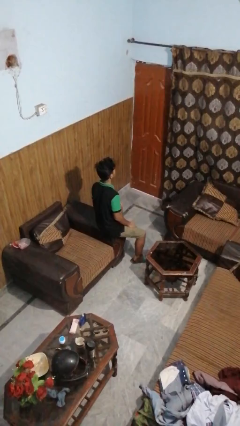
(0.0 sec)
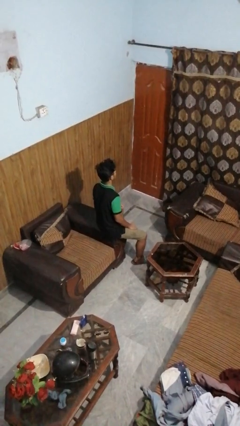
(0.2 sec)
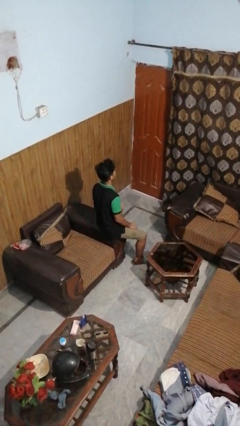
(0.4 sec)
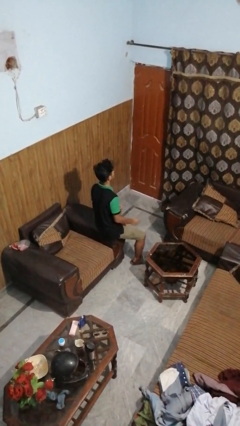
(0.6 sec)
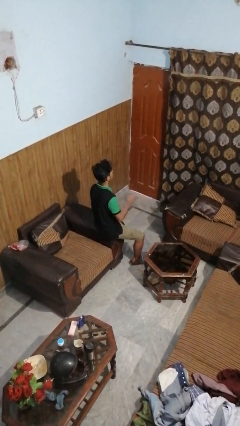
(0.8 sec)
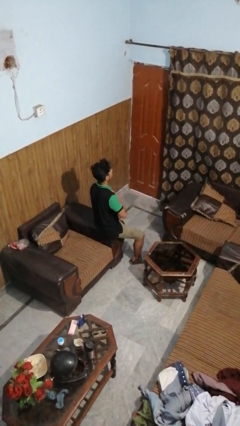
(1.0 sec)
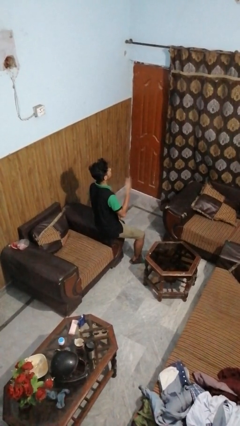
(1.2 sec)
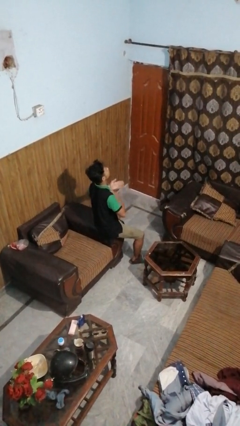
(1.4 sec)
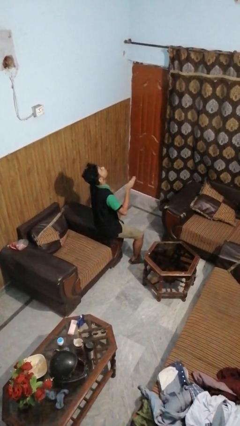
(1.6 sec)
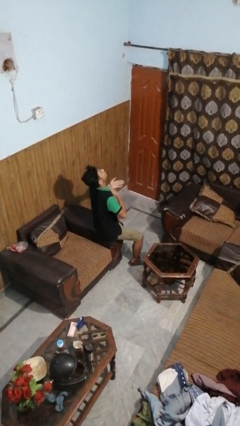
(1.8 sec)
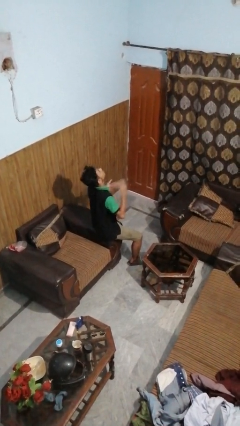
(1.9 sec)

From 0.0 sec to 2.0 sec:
person drums on chest

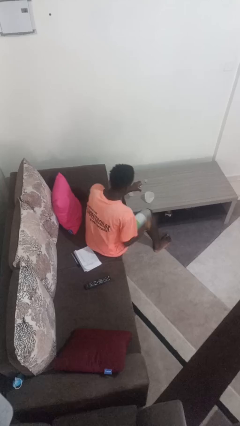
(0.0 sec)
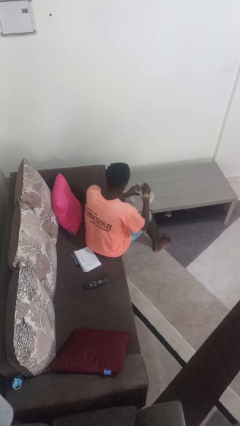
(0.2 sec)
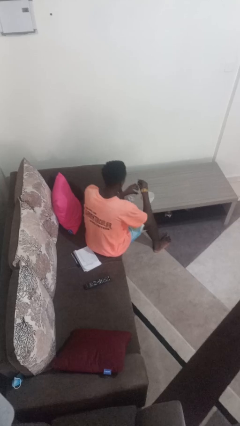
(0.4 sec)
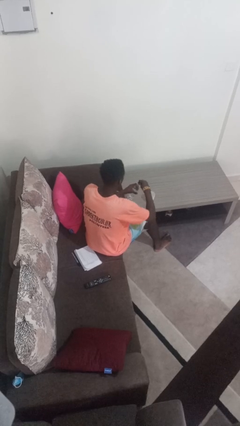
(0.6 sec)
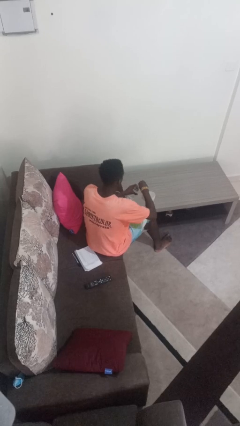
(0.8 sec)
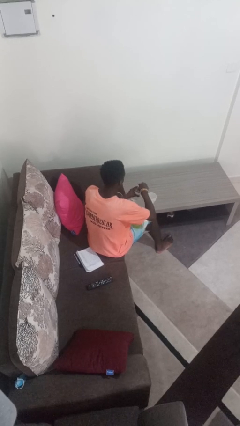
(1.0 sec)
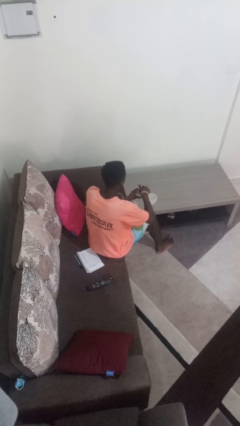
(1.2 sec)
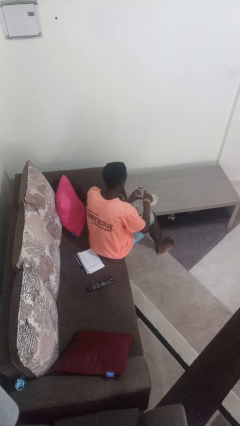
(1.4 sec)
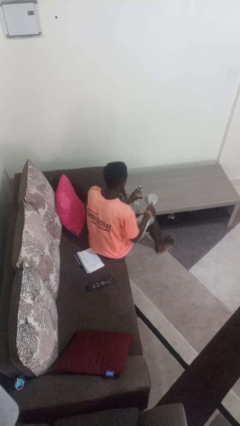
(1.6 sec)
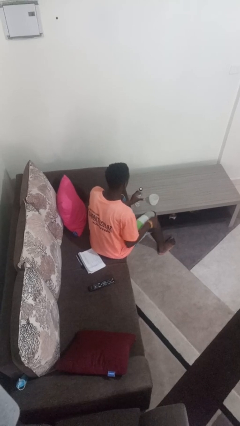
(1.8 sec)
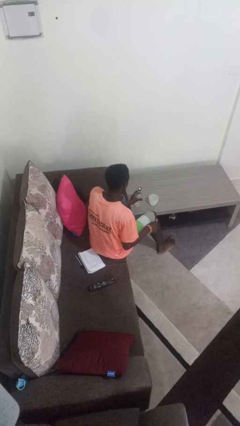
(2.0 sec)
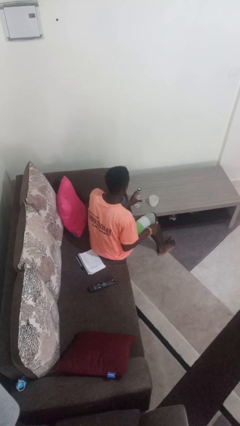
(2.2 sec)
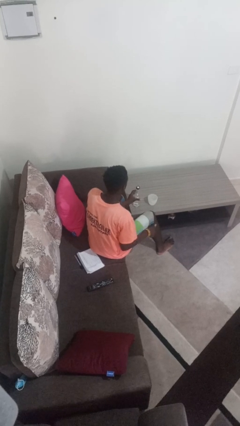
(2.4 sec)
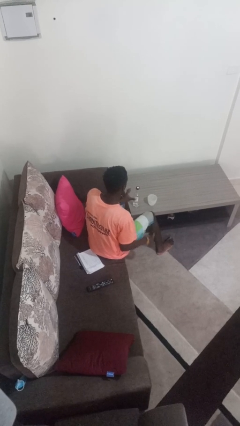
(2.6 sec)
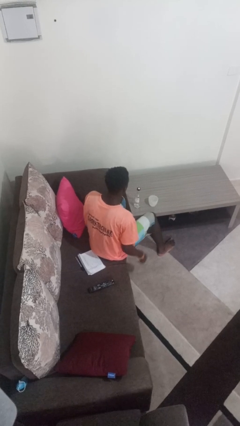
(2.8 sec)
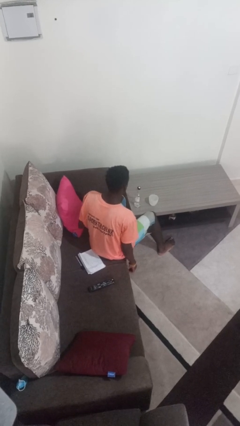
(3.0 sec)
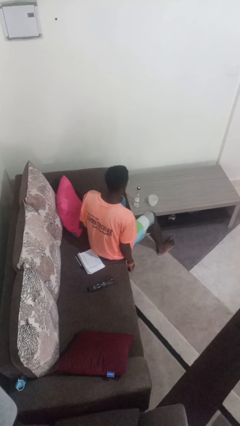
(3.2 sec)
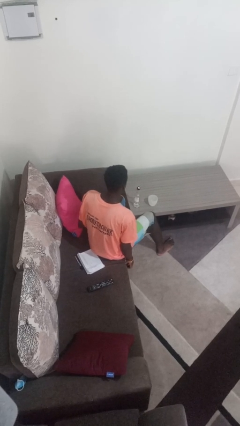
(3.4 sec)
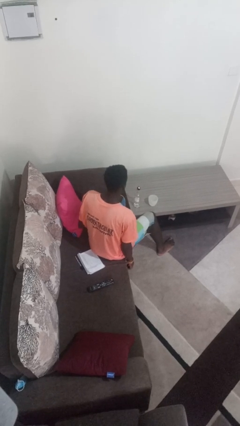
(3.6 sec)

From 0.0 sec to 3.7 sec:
person screws lid to bottle

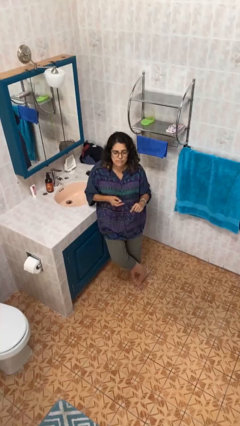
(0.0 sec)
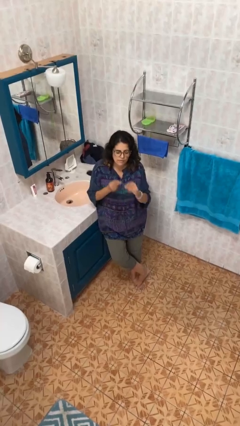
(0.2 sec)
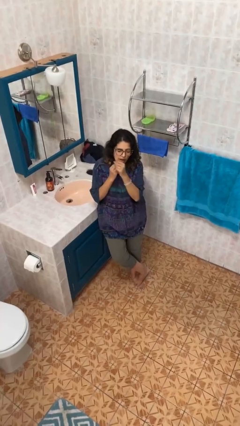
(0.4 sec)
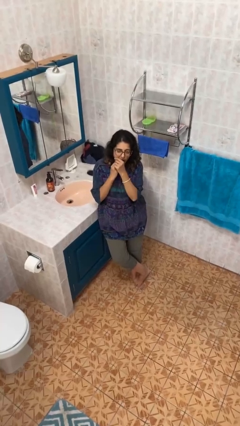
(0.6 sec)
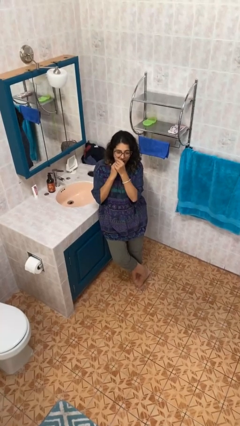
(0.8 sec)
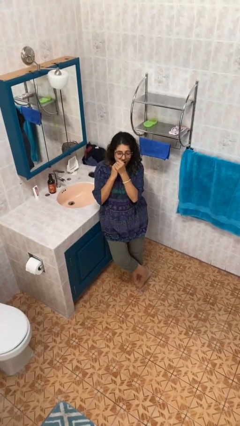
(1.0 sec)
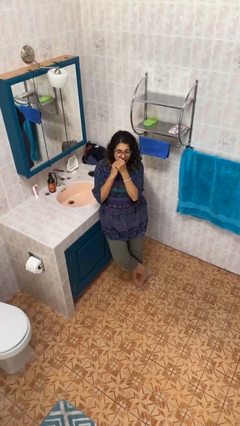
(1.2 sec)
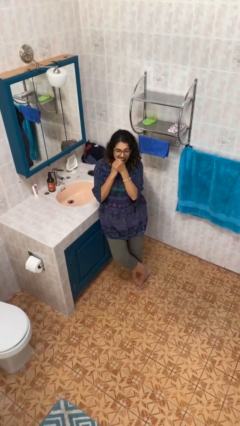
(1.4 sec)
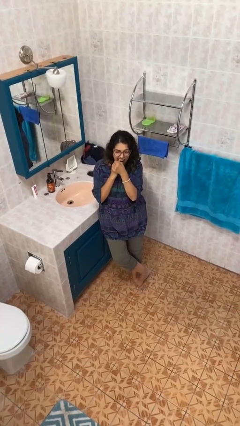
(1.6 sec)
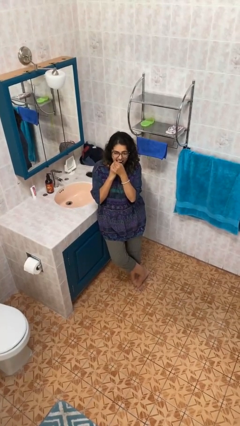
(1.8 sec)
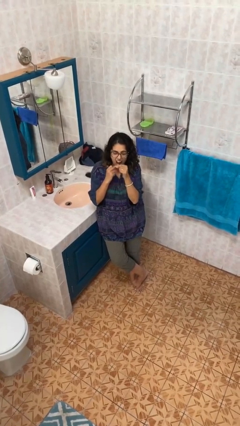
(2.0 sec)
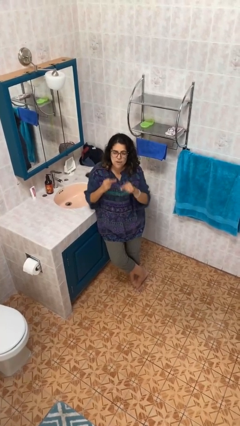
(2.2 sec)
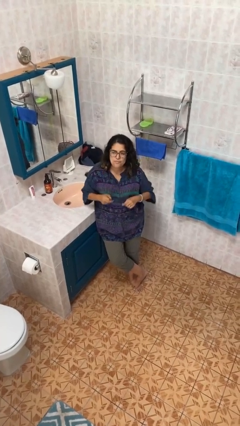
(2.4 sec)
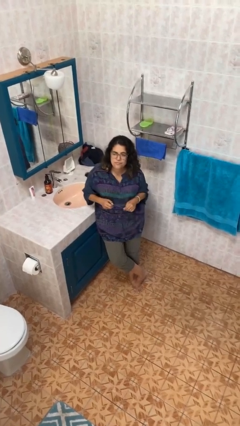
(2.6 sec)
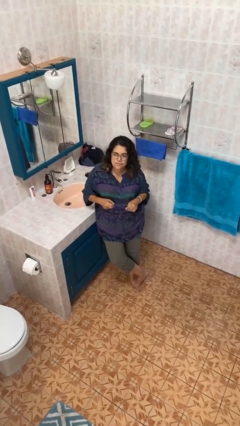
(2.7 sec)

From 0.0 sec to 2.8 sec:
person flosses

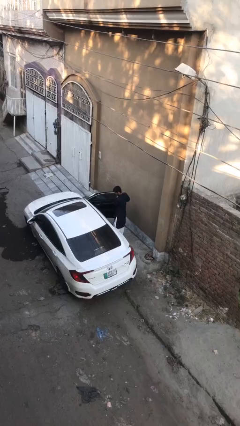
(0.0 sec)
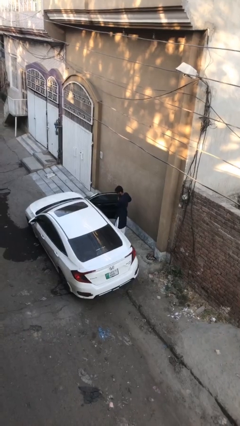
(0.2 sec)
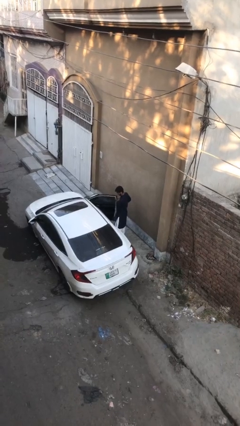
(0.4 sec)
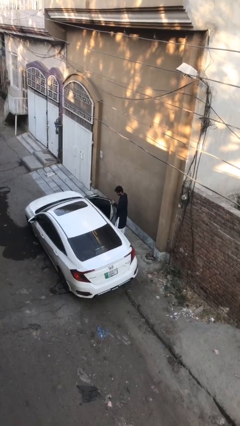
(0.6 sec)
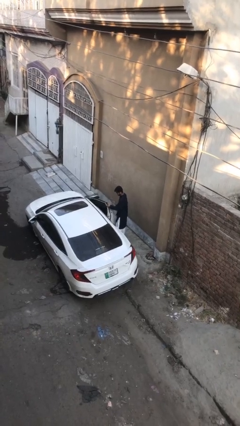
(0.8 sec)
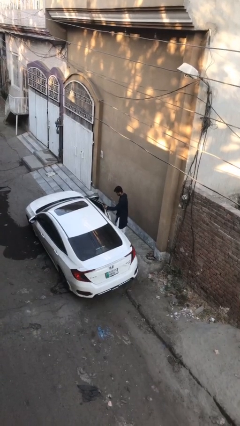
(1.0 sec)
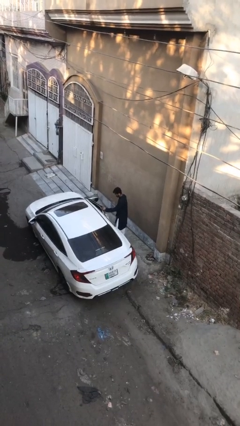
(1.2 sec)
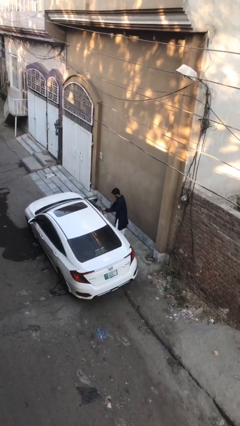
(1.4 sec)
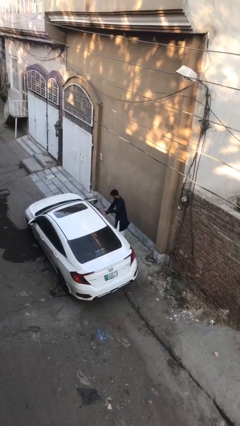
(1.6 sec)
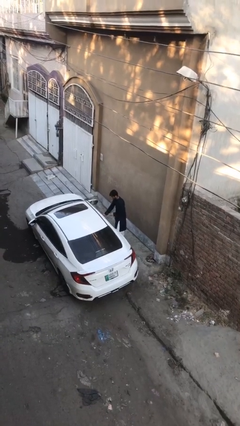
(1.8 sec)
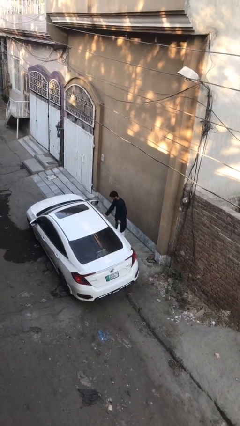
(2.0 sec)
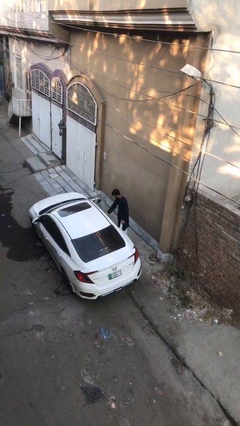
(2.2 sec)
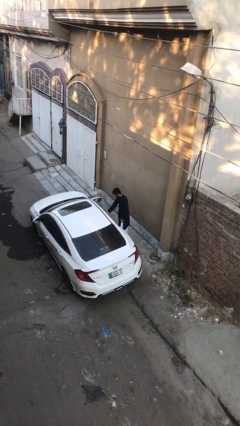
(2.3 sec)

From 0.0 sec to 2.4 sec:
person closes car door

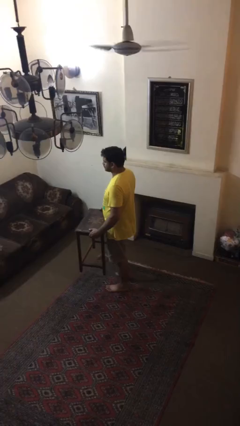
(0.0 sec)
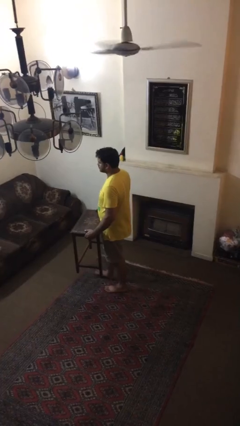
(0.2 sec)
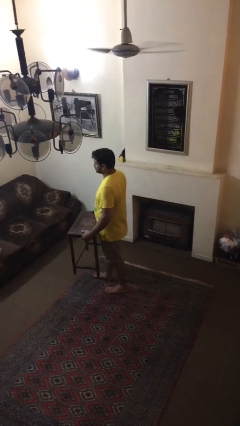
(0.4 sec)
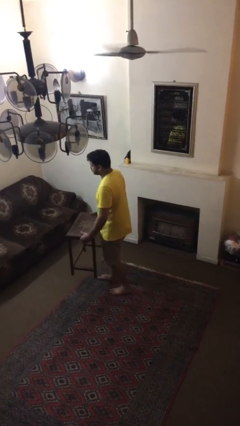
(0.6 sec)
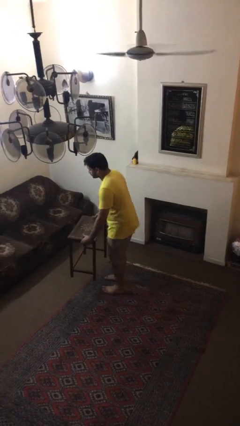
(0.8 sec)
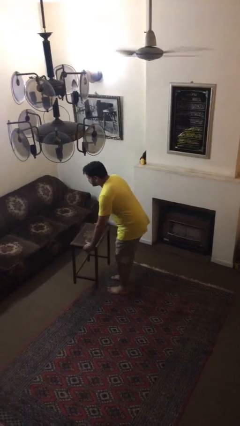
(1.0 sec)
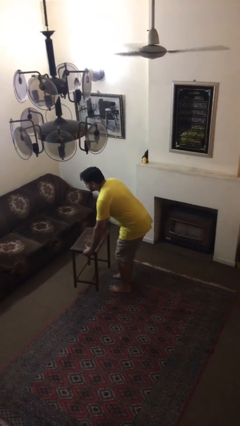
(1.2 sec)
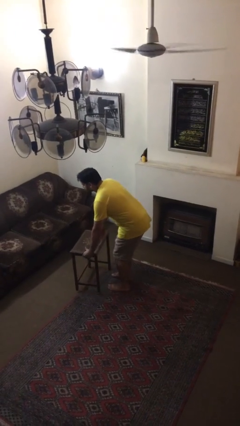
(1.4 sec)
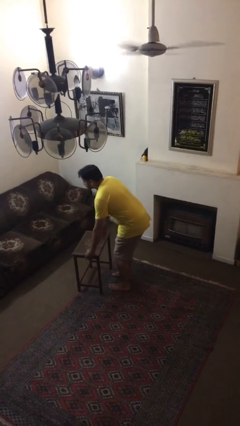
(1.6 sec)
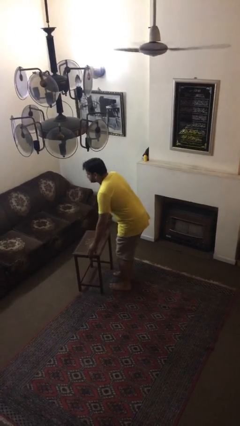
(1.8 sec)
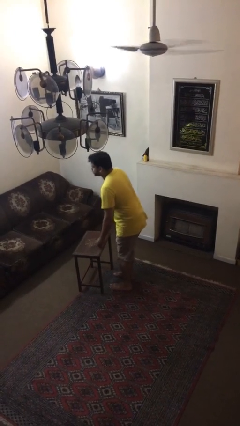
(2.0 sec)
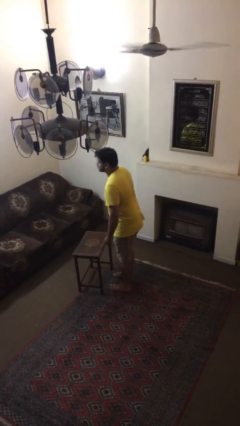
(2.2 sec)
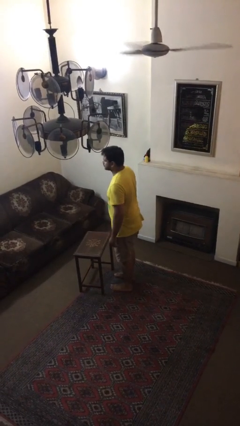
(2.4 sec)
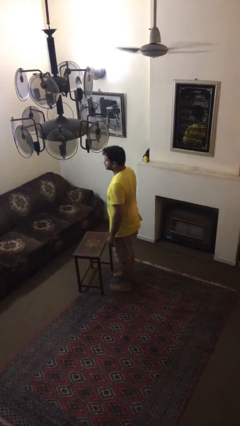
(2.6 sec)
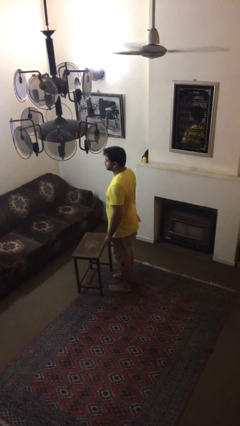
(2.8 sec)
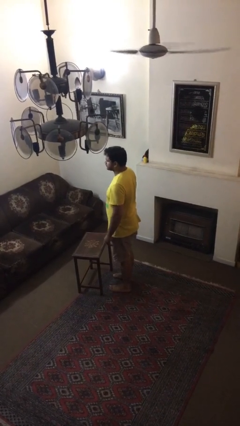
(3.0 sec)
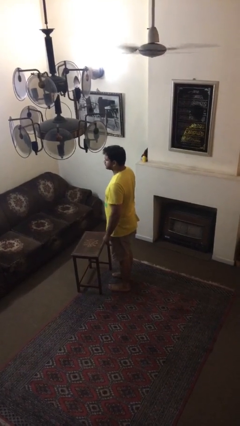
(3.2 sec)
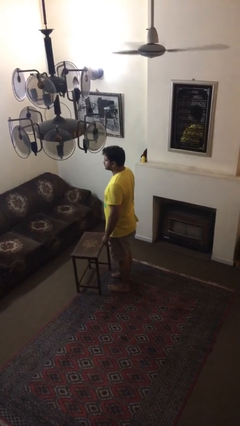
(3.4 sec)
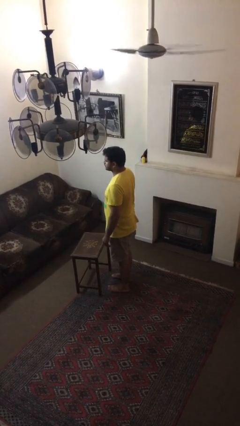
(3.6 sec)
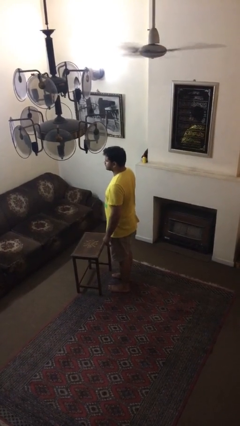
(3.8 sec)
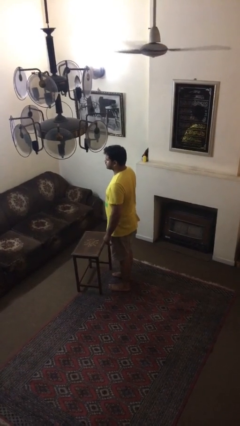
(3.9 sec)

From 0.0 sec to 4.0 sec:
person puts down object on floor

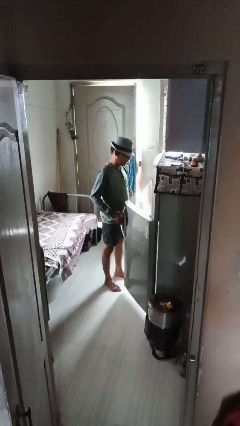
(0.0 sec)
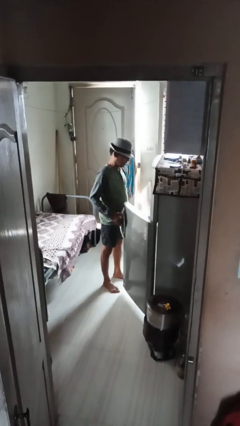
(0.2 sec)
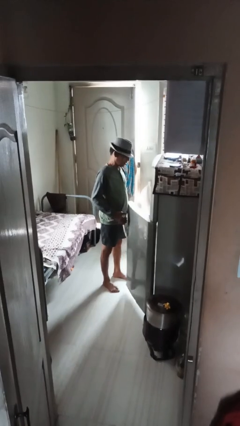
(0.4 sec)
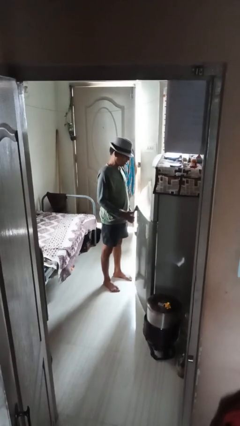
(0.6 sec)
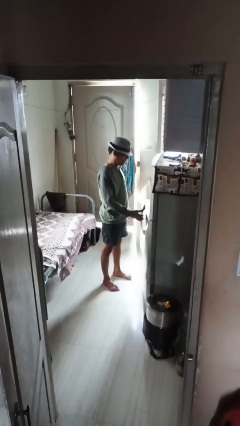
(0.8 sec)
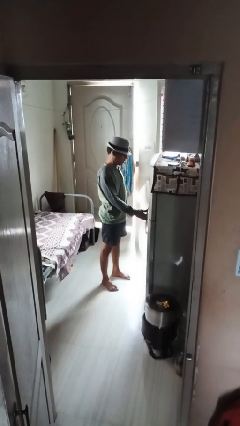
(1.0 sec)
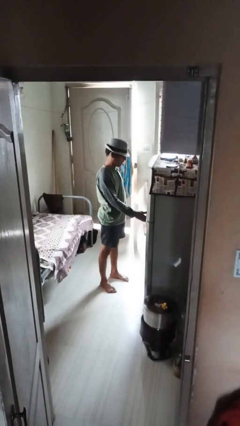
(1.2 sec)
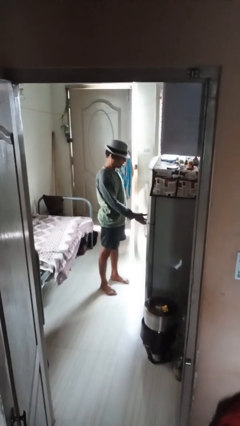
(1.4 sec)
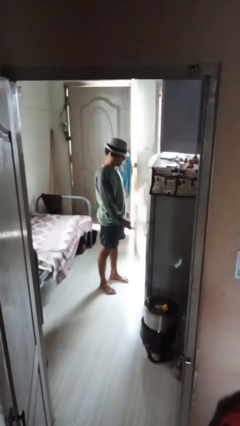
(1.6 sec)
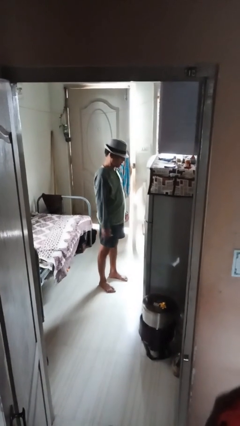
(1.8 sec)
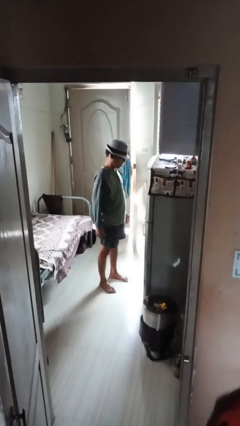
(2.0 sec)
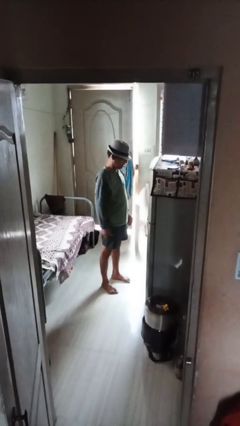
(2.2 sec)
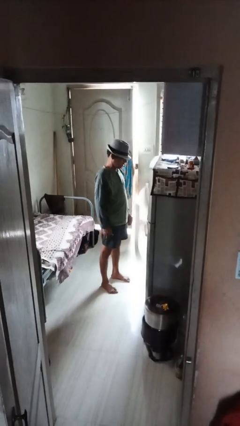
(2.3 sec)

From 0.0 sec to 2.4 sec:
person closes refrigerator
